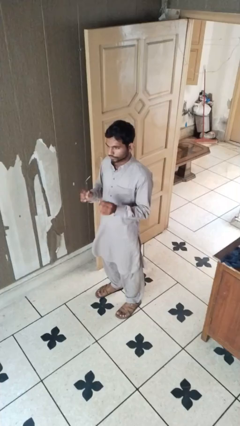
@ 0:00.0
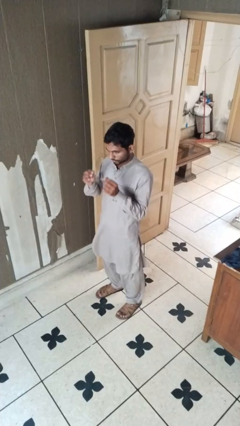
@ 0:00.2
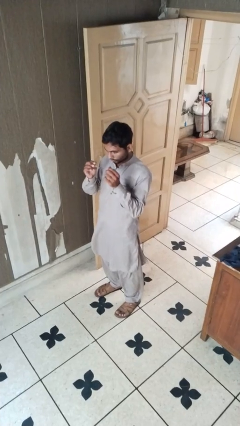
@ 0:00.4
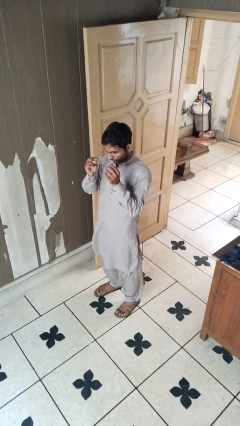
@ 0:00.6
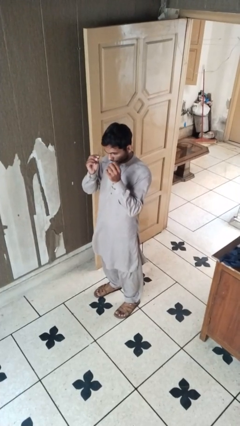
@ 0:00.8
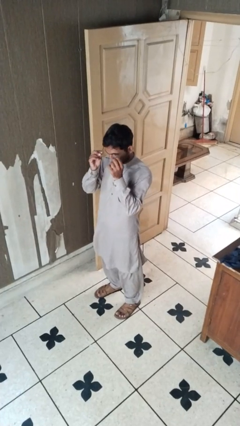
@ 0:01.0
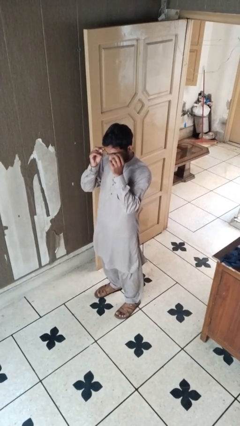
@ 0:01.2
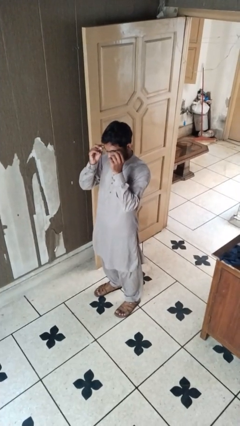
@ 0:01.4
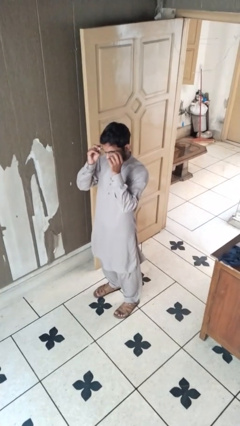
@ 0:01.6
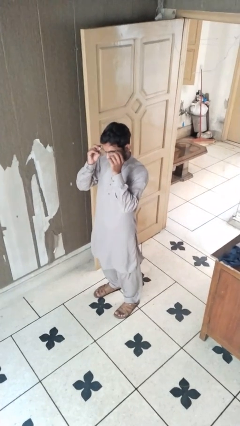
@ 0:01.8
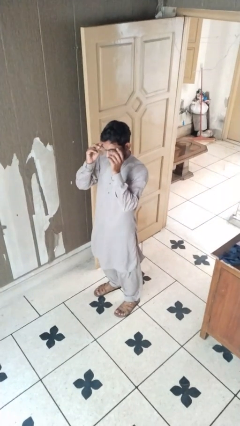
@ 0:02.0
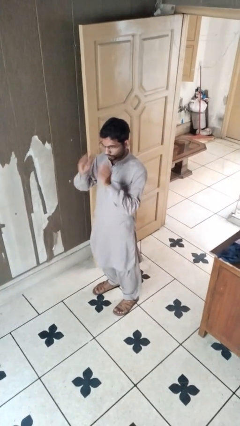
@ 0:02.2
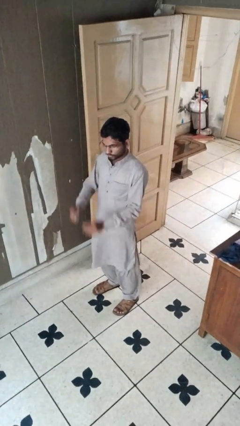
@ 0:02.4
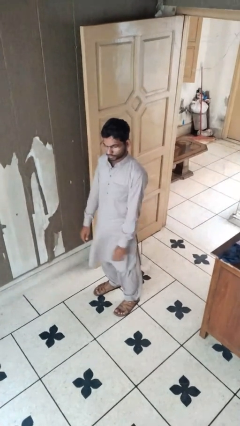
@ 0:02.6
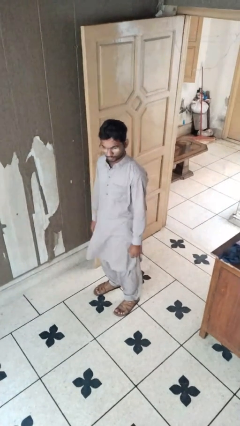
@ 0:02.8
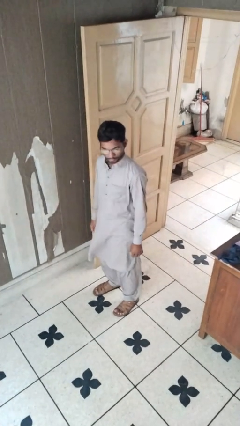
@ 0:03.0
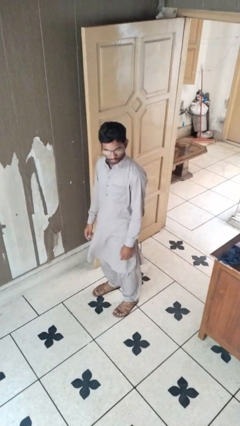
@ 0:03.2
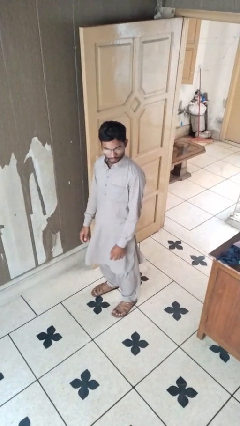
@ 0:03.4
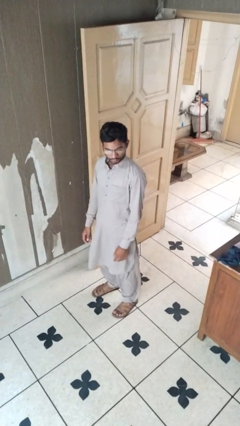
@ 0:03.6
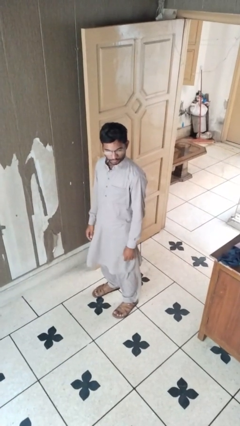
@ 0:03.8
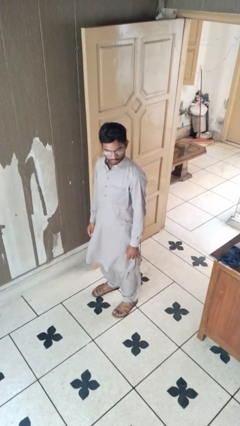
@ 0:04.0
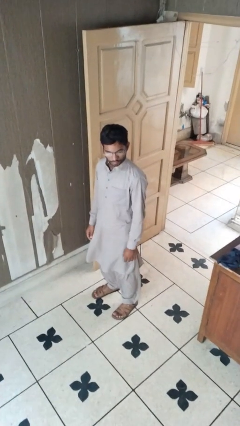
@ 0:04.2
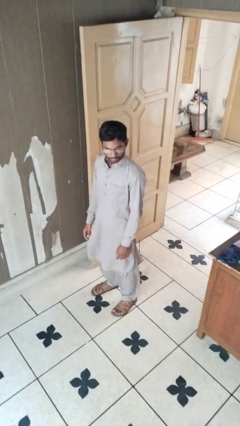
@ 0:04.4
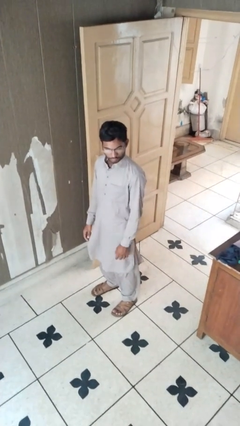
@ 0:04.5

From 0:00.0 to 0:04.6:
person puts on glasses

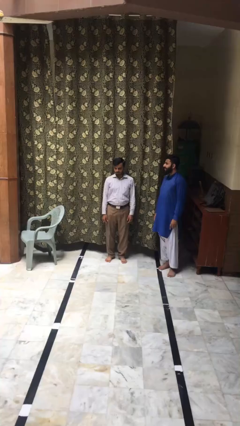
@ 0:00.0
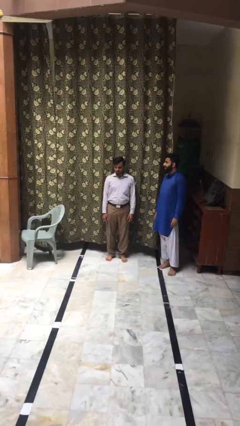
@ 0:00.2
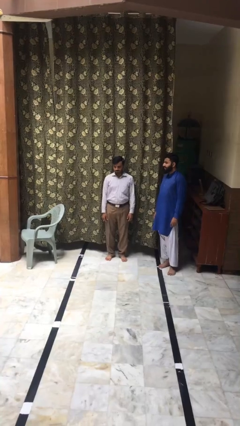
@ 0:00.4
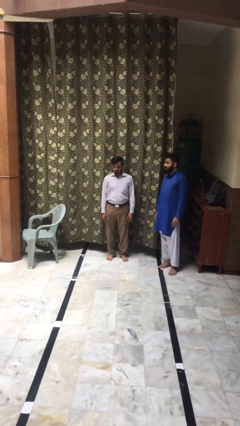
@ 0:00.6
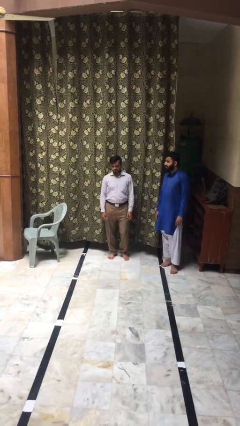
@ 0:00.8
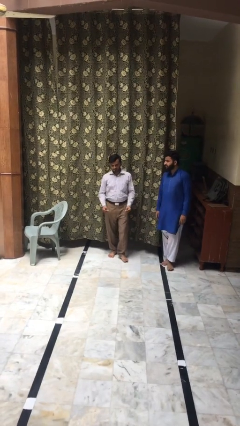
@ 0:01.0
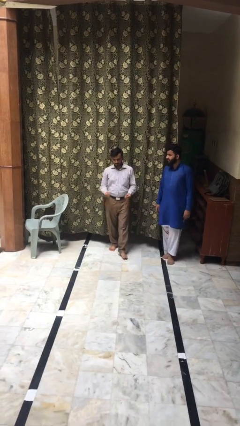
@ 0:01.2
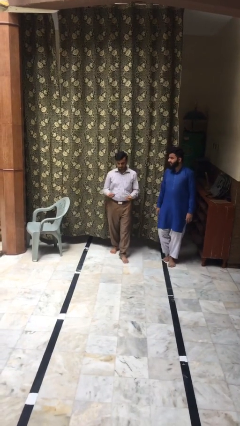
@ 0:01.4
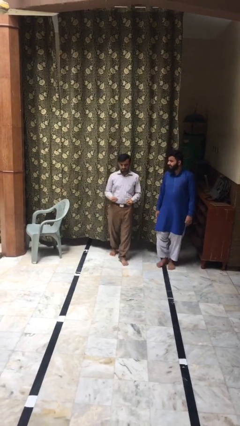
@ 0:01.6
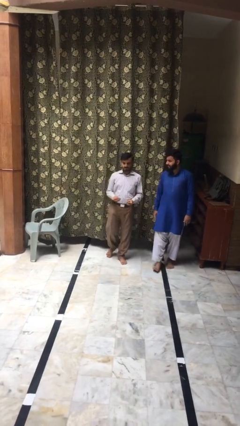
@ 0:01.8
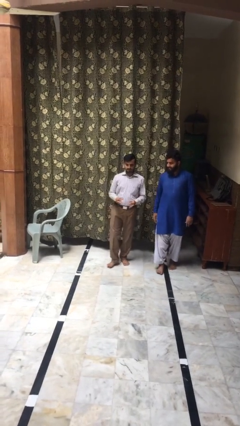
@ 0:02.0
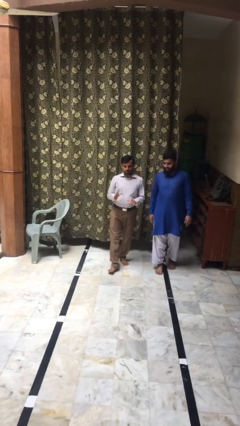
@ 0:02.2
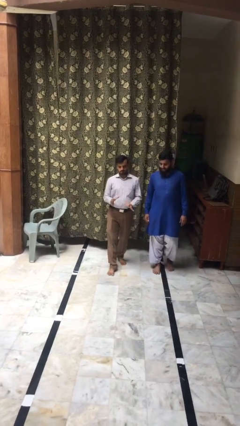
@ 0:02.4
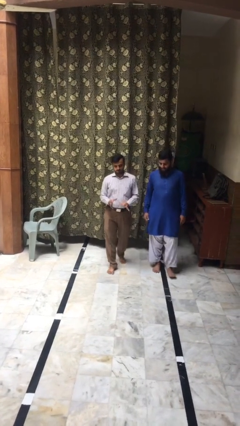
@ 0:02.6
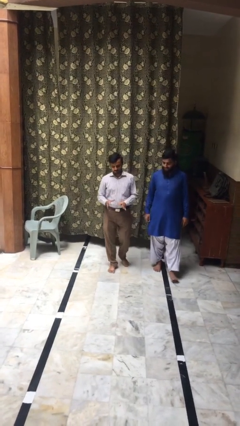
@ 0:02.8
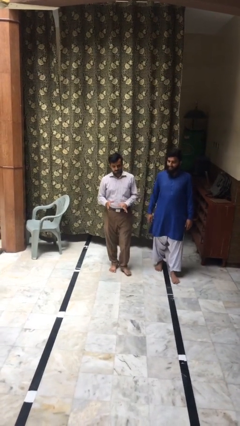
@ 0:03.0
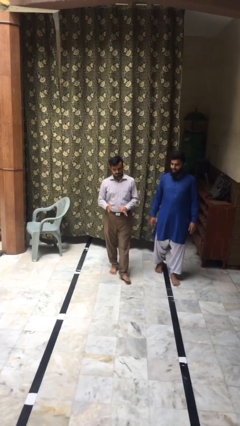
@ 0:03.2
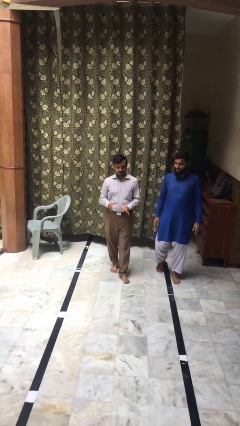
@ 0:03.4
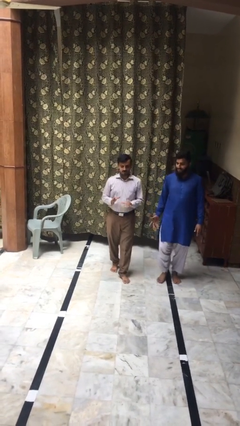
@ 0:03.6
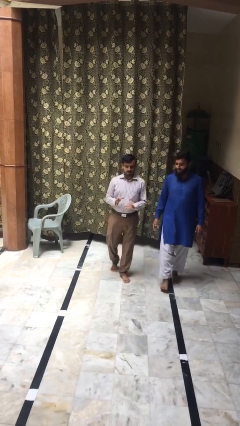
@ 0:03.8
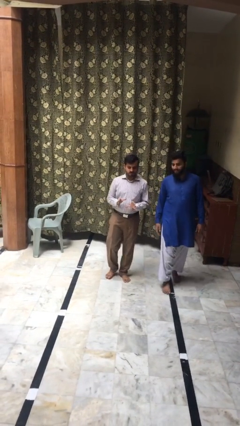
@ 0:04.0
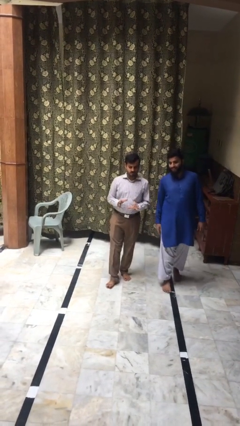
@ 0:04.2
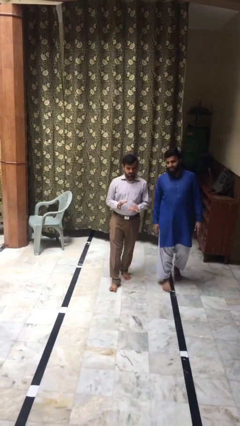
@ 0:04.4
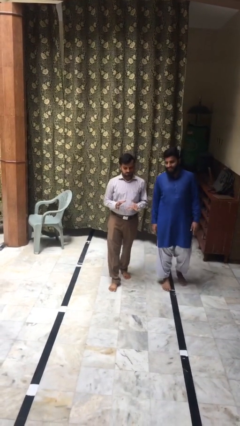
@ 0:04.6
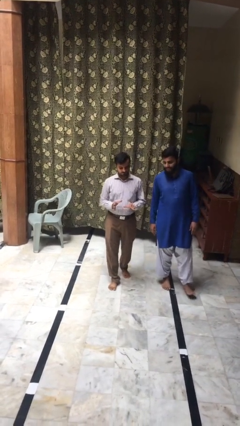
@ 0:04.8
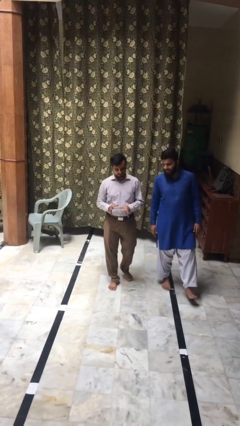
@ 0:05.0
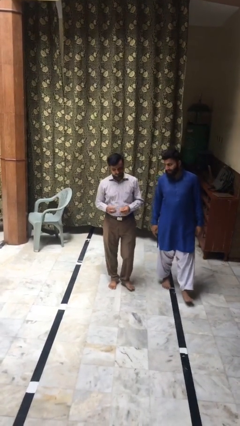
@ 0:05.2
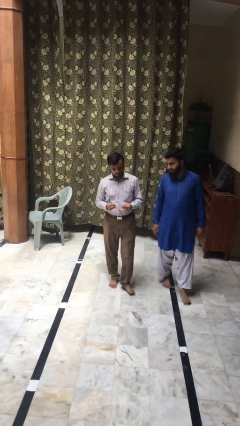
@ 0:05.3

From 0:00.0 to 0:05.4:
person talks to person

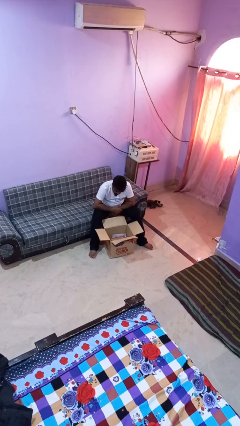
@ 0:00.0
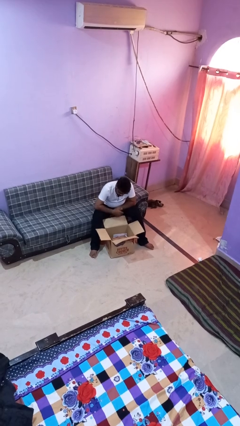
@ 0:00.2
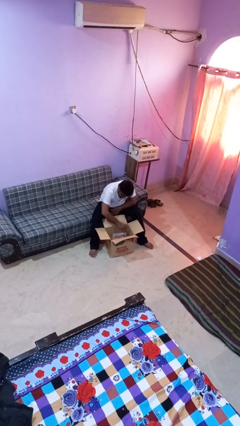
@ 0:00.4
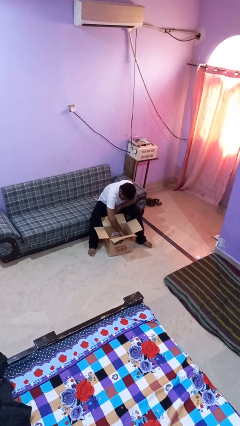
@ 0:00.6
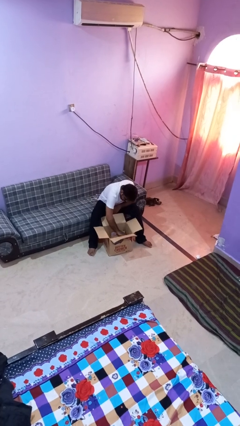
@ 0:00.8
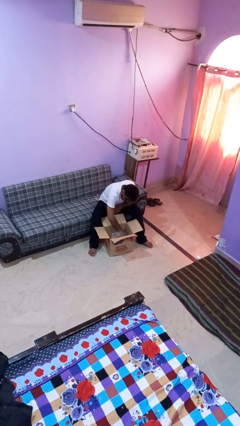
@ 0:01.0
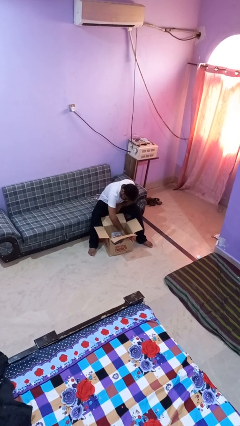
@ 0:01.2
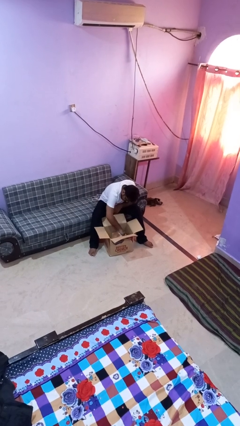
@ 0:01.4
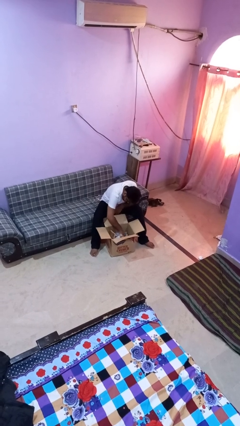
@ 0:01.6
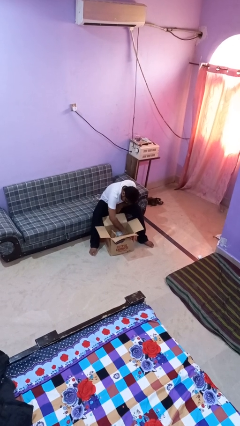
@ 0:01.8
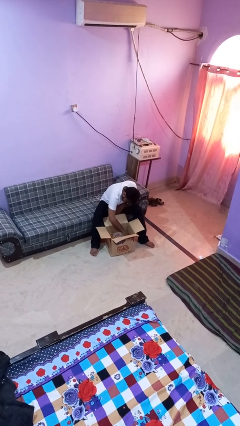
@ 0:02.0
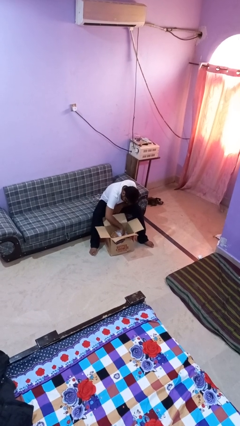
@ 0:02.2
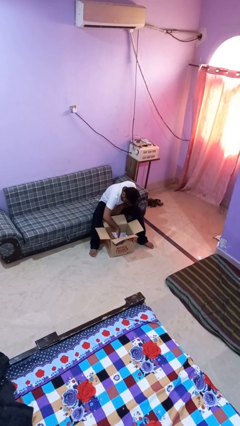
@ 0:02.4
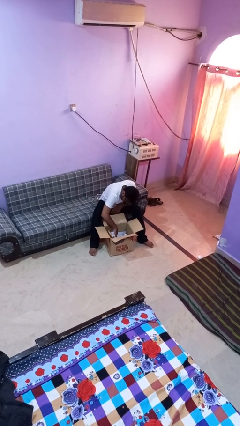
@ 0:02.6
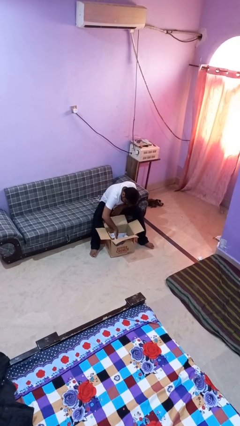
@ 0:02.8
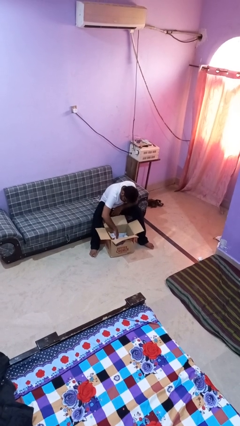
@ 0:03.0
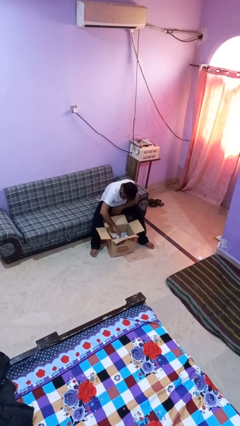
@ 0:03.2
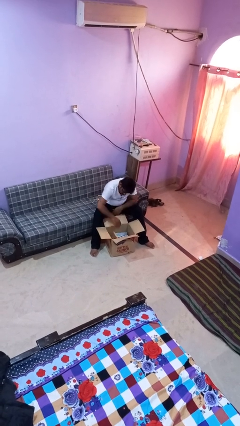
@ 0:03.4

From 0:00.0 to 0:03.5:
person searches in box

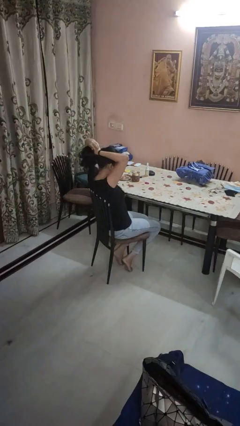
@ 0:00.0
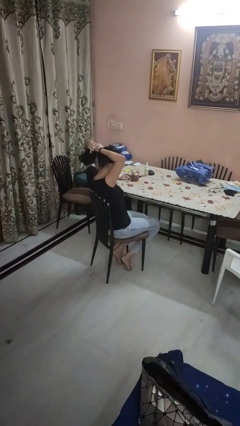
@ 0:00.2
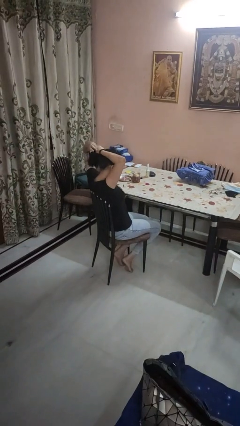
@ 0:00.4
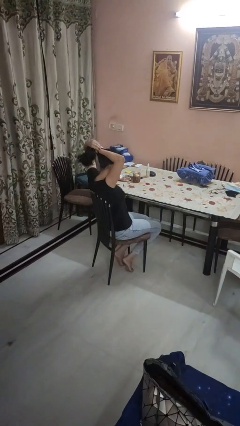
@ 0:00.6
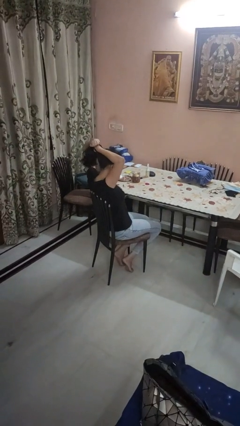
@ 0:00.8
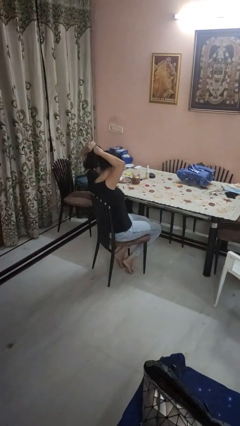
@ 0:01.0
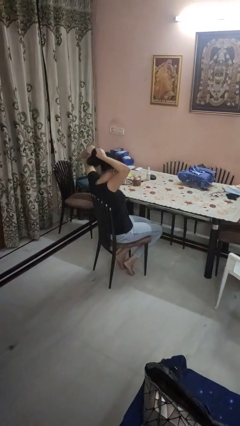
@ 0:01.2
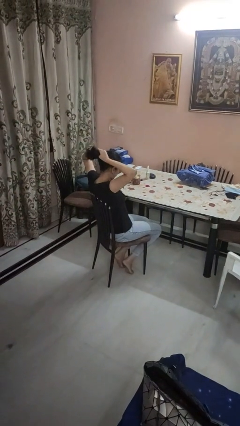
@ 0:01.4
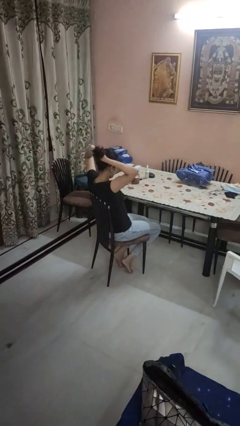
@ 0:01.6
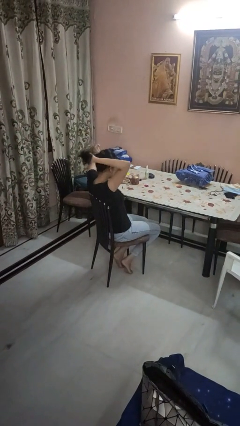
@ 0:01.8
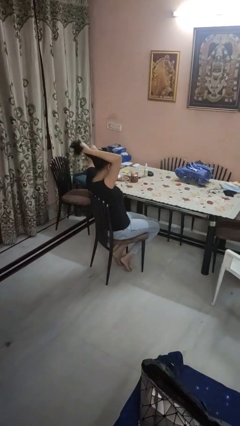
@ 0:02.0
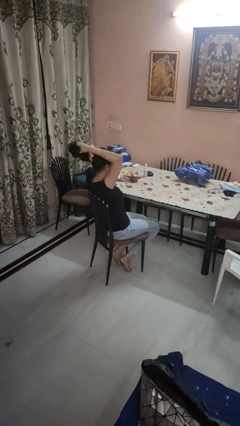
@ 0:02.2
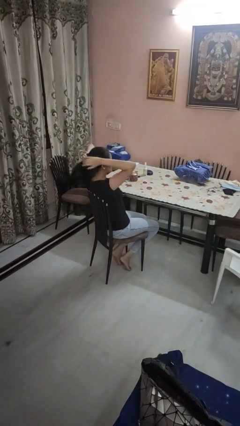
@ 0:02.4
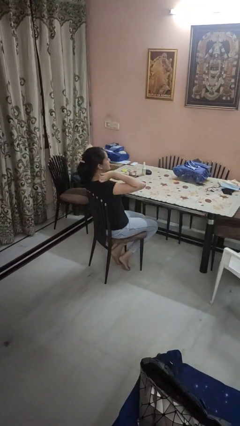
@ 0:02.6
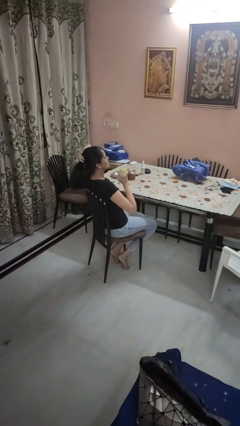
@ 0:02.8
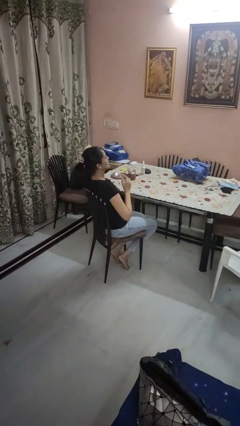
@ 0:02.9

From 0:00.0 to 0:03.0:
person puts hair in ponytail

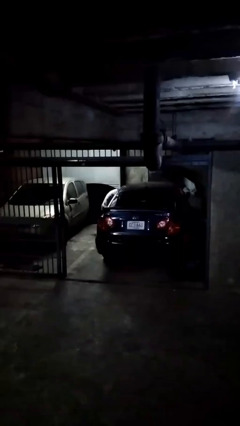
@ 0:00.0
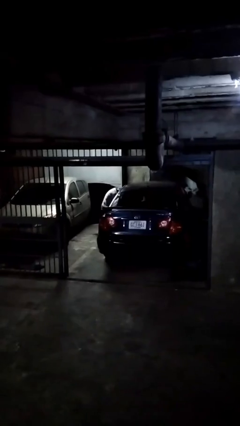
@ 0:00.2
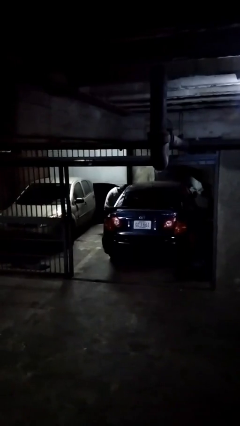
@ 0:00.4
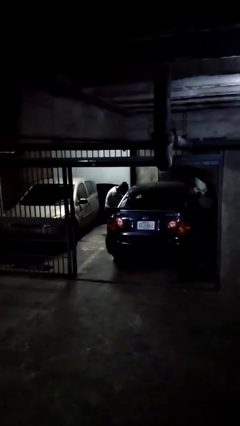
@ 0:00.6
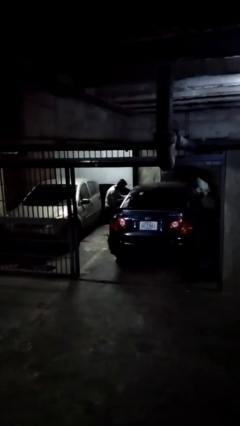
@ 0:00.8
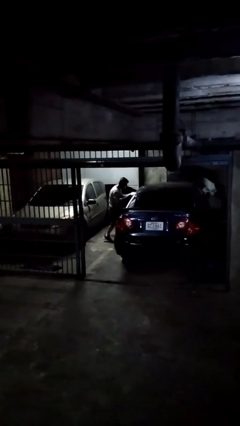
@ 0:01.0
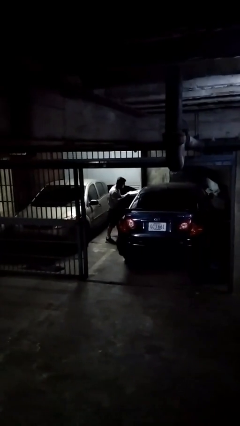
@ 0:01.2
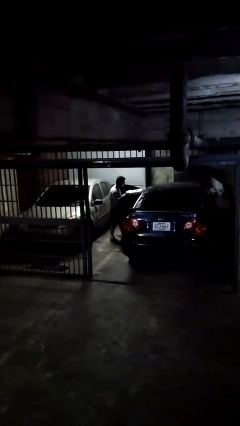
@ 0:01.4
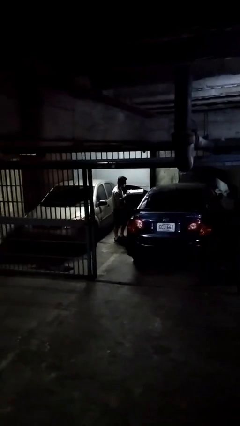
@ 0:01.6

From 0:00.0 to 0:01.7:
person unloads car
